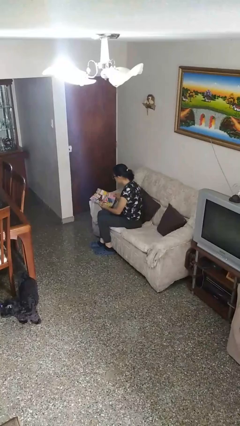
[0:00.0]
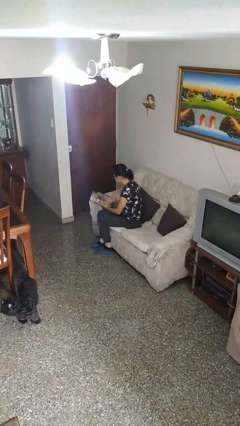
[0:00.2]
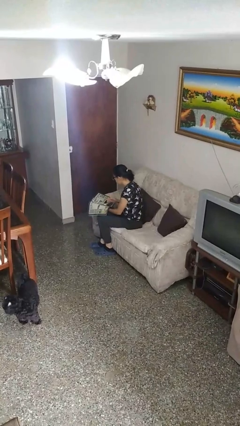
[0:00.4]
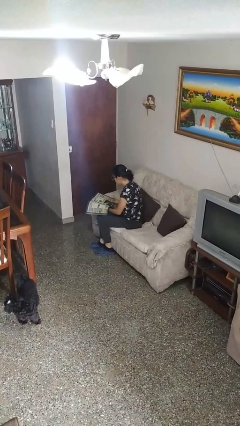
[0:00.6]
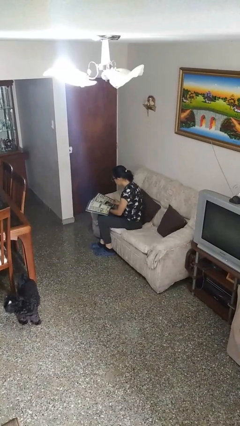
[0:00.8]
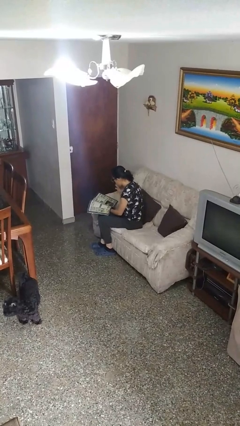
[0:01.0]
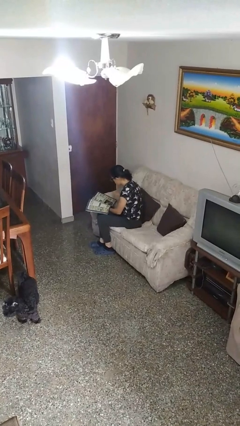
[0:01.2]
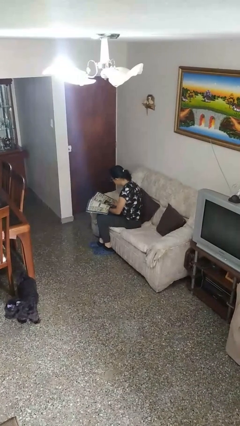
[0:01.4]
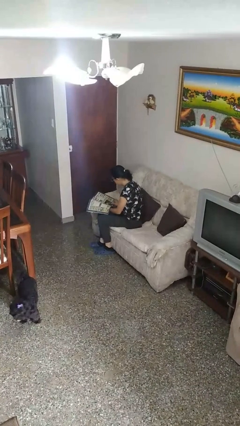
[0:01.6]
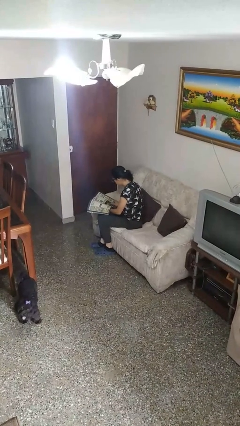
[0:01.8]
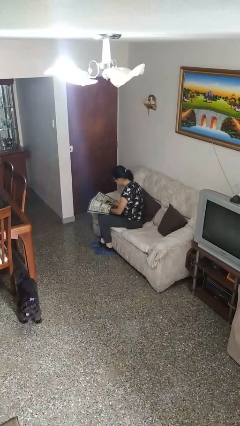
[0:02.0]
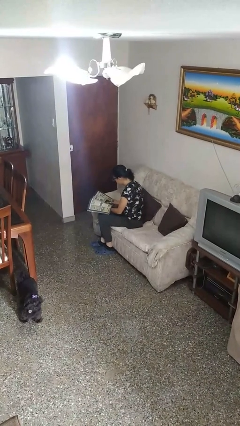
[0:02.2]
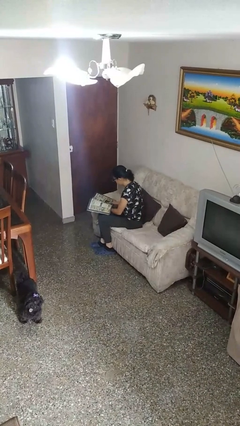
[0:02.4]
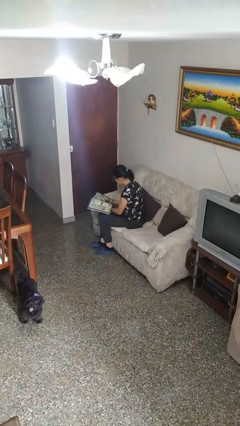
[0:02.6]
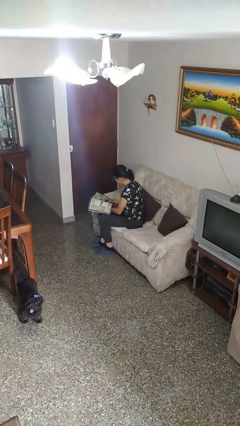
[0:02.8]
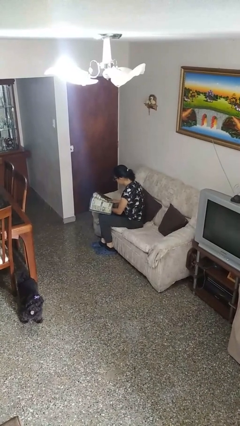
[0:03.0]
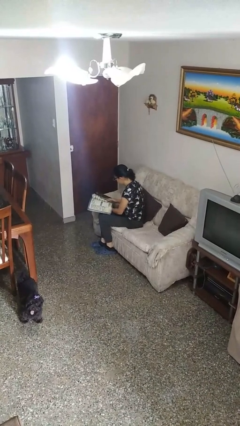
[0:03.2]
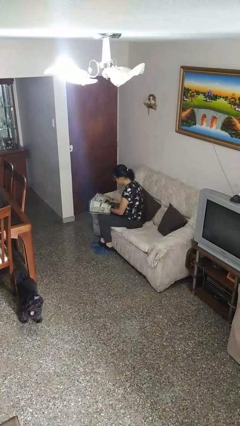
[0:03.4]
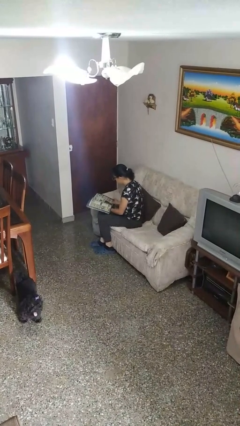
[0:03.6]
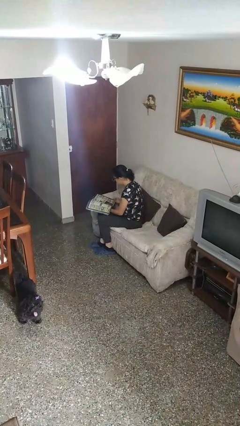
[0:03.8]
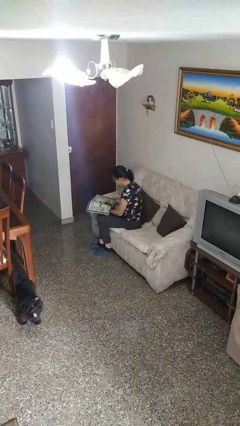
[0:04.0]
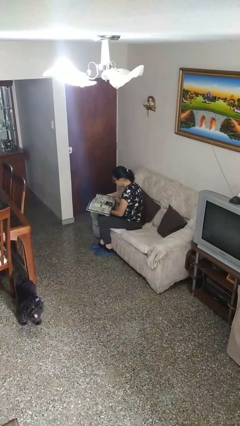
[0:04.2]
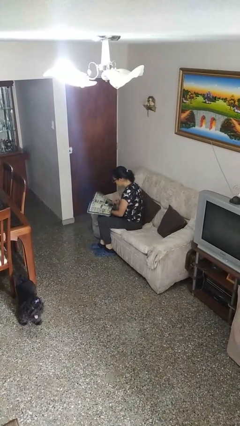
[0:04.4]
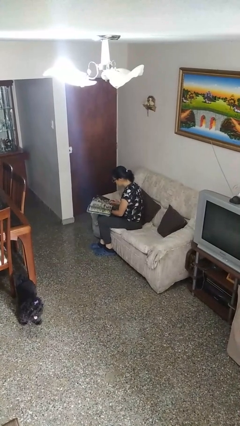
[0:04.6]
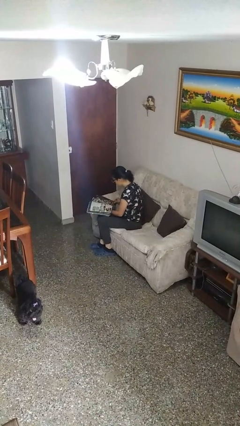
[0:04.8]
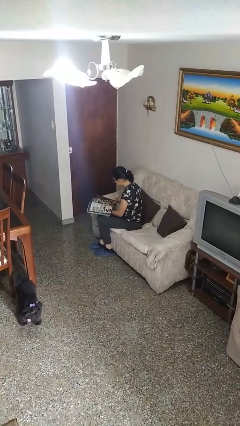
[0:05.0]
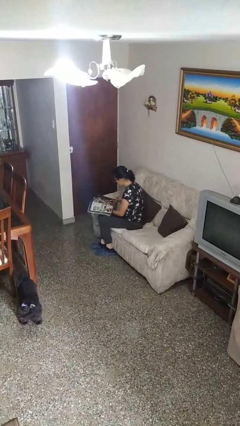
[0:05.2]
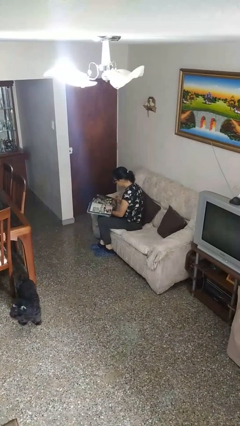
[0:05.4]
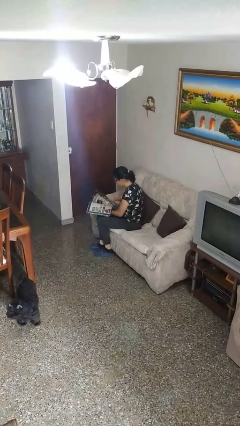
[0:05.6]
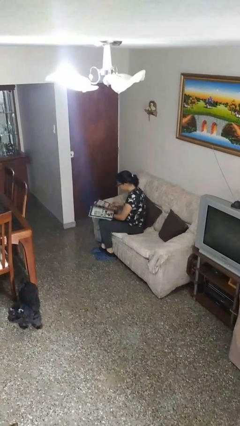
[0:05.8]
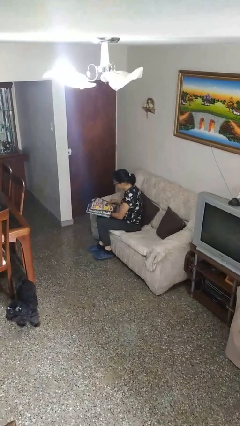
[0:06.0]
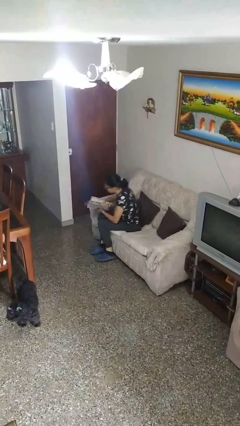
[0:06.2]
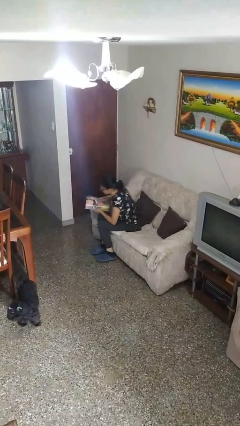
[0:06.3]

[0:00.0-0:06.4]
person reads magazine

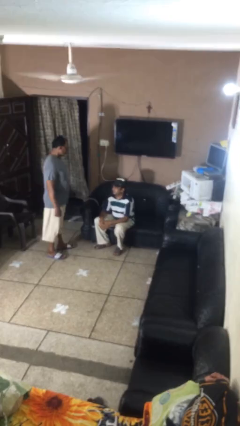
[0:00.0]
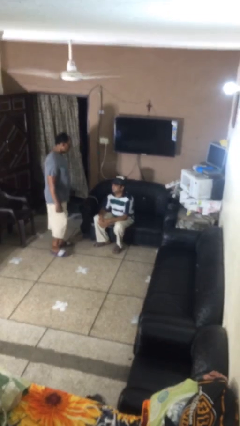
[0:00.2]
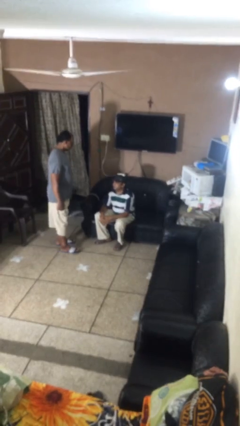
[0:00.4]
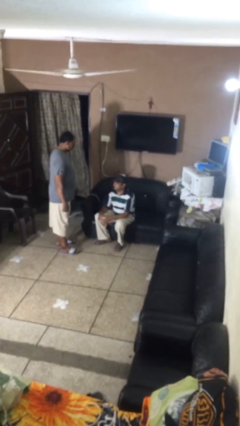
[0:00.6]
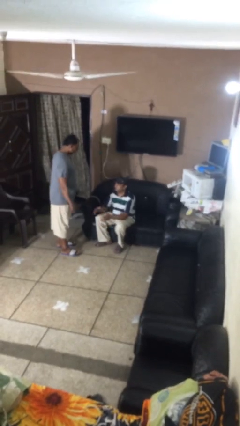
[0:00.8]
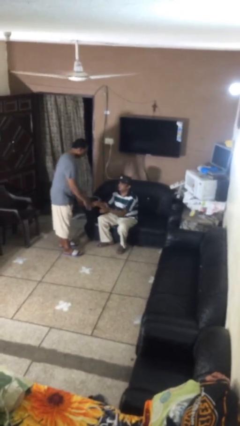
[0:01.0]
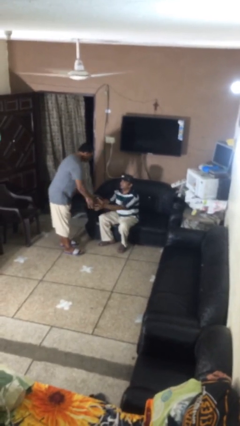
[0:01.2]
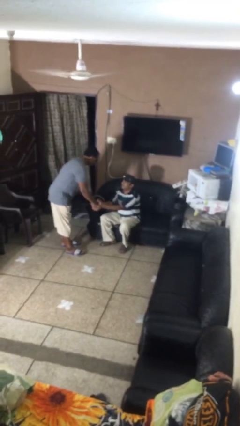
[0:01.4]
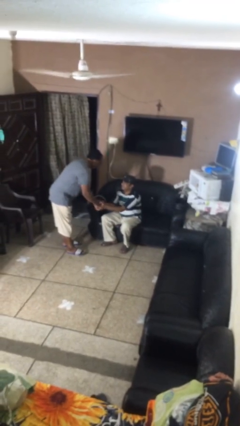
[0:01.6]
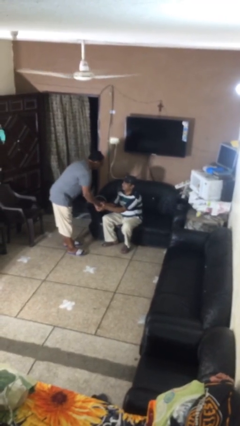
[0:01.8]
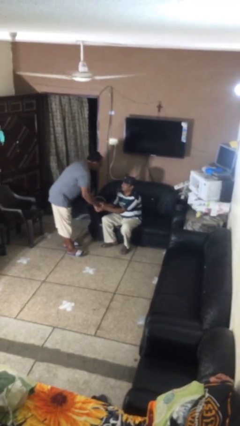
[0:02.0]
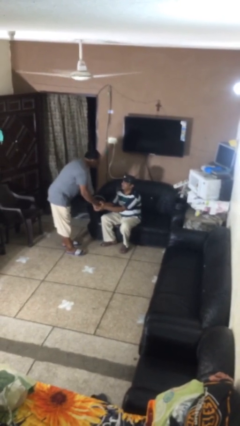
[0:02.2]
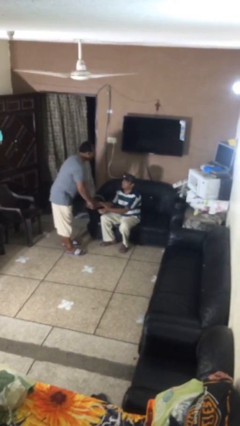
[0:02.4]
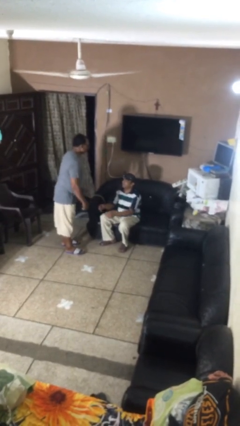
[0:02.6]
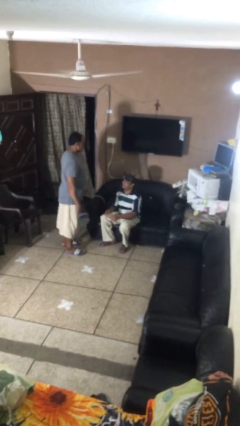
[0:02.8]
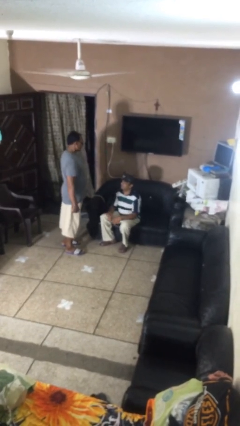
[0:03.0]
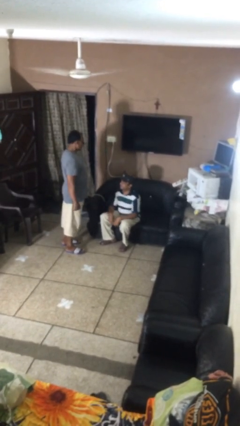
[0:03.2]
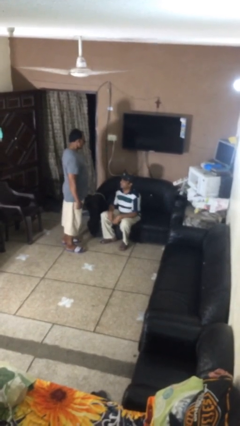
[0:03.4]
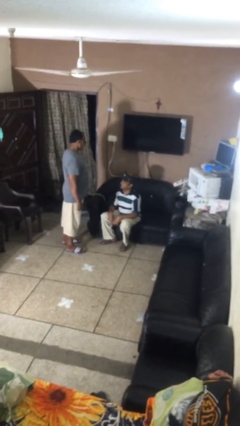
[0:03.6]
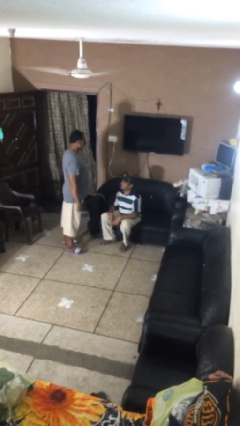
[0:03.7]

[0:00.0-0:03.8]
person shakes hand

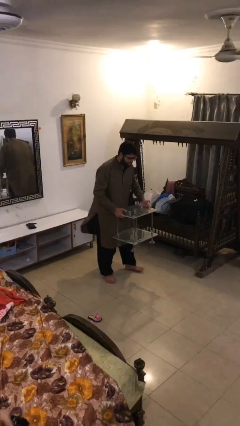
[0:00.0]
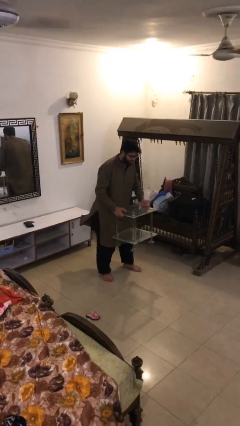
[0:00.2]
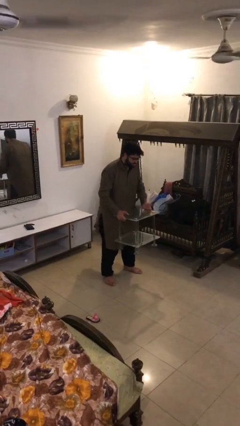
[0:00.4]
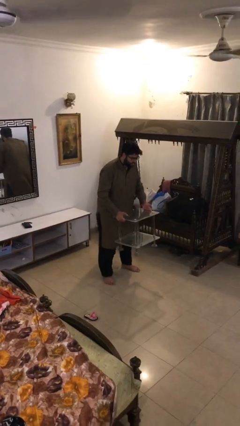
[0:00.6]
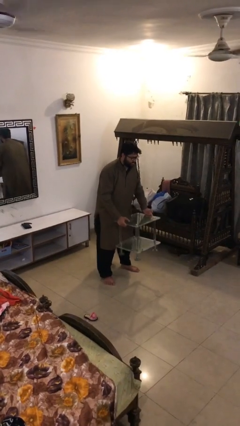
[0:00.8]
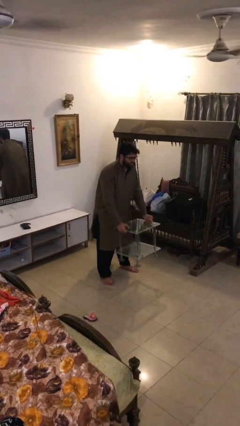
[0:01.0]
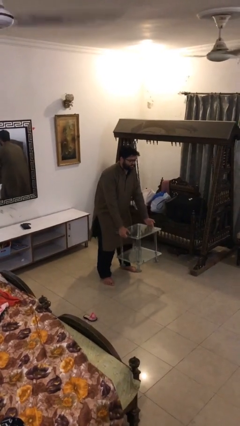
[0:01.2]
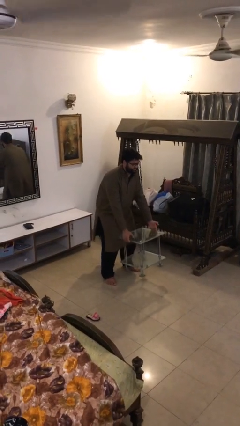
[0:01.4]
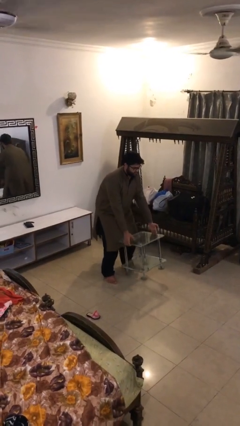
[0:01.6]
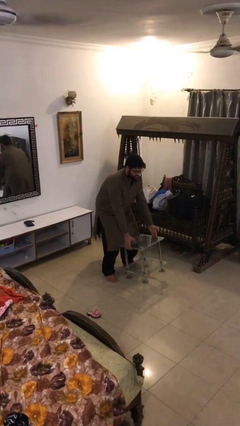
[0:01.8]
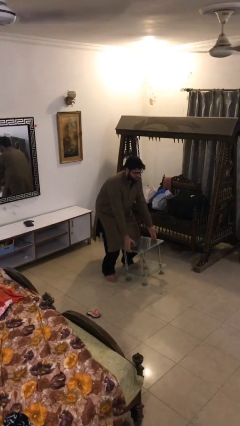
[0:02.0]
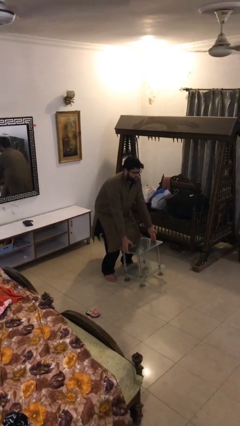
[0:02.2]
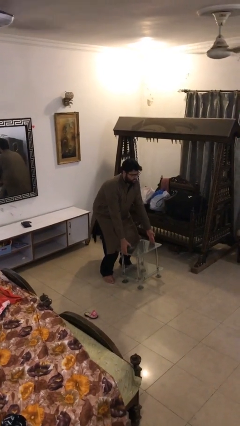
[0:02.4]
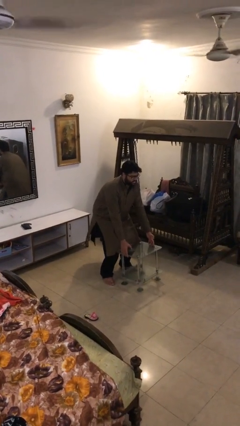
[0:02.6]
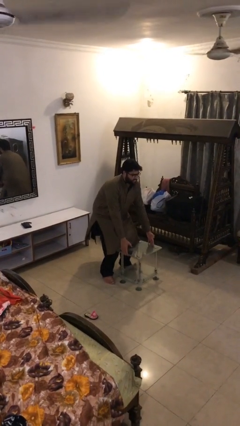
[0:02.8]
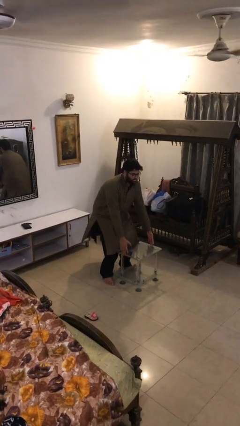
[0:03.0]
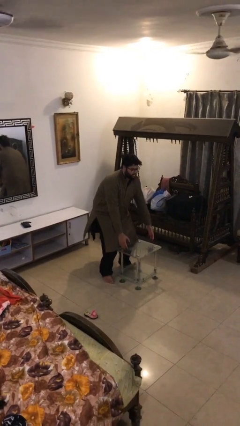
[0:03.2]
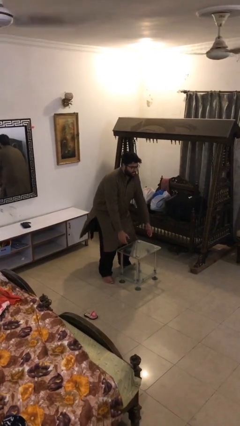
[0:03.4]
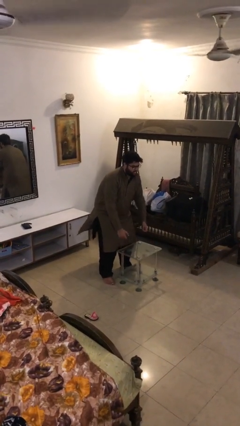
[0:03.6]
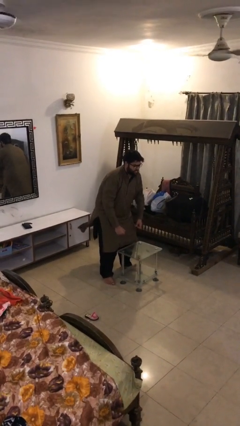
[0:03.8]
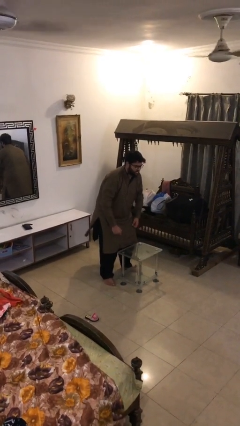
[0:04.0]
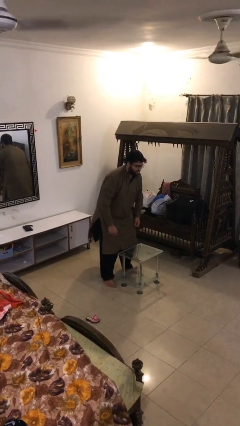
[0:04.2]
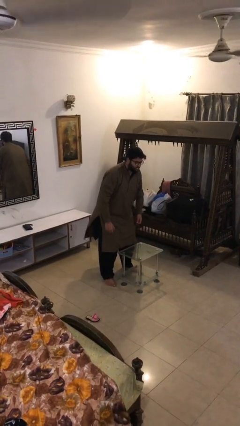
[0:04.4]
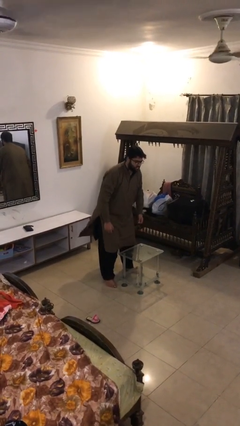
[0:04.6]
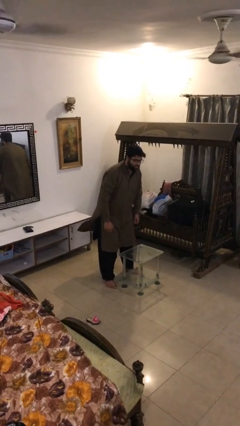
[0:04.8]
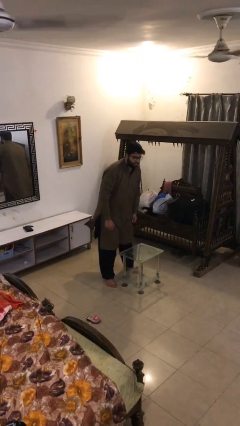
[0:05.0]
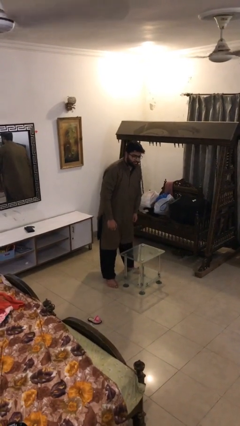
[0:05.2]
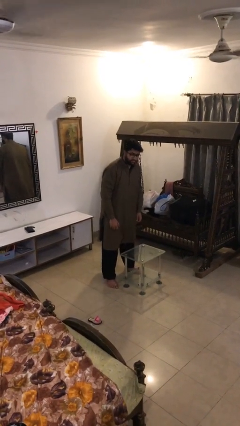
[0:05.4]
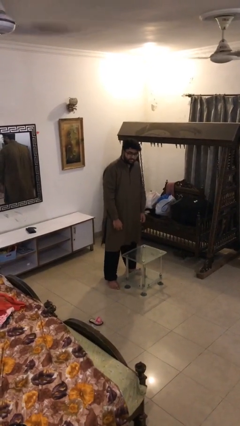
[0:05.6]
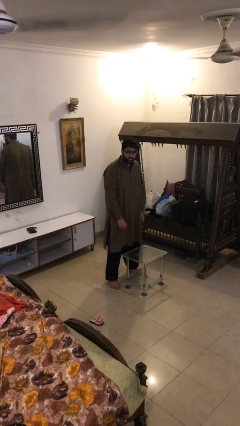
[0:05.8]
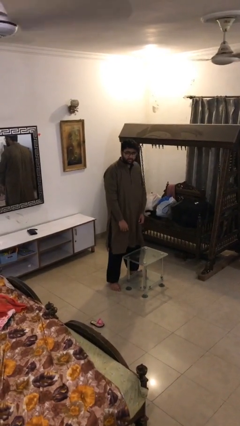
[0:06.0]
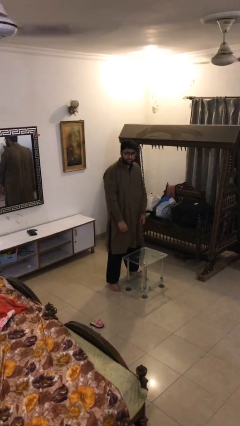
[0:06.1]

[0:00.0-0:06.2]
person puts down object on floor

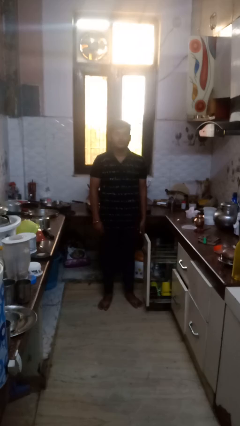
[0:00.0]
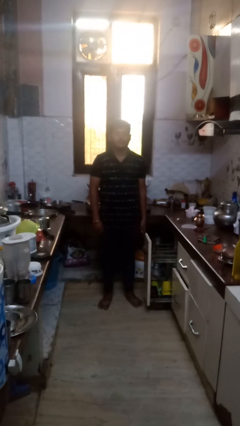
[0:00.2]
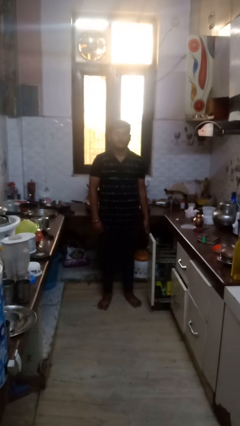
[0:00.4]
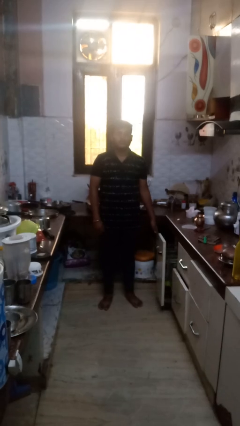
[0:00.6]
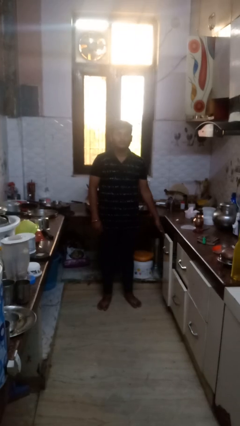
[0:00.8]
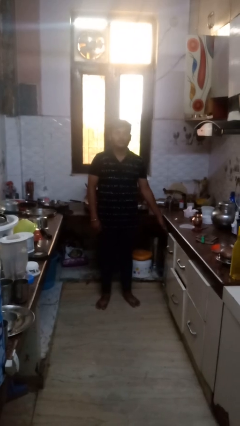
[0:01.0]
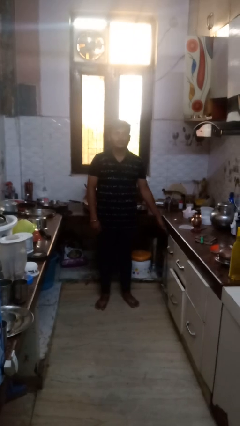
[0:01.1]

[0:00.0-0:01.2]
person closes dishwasher
